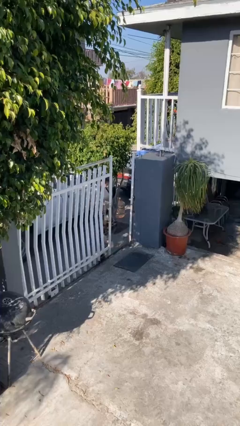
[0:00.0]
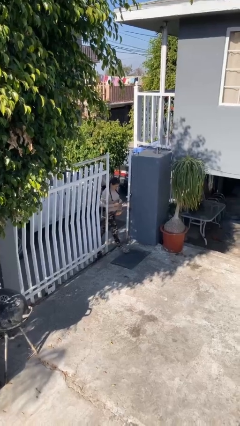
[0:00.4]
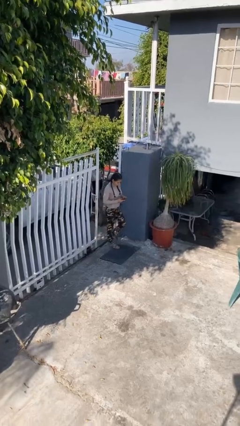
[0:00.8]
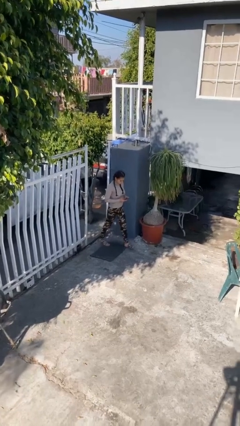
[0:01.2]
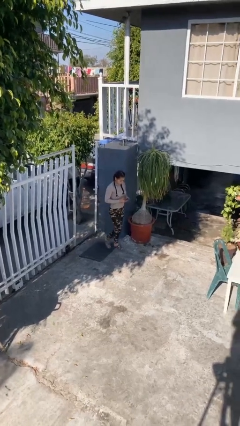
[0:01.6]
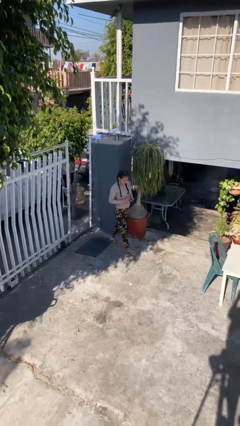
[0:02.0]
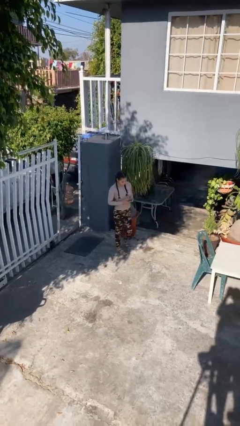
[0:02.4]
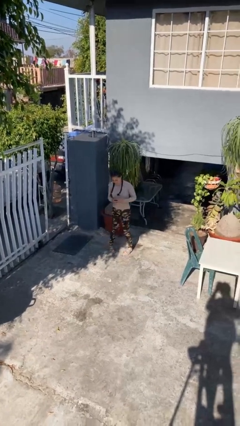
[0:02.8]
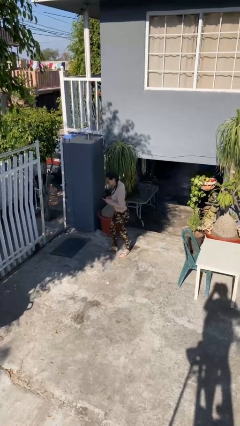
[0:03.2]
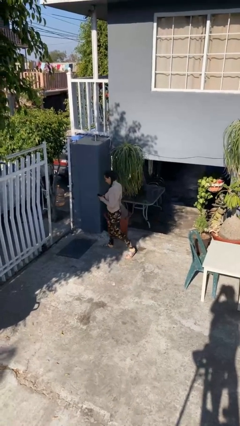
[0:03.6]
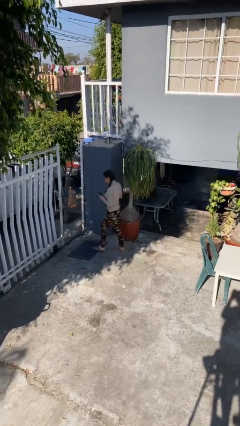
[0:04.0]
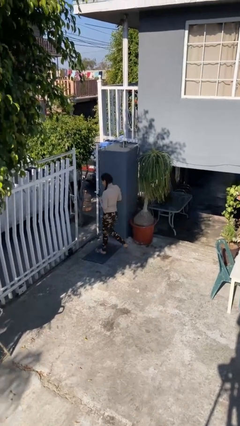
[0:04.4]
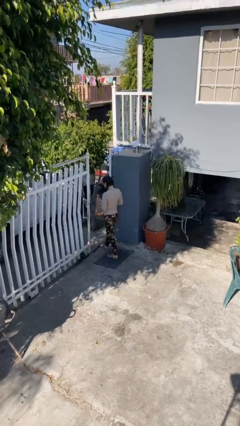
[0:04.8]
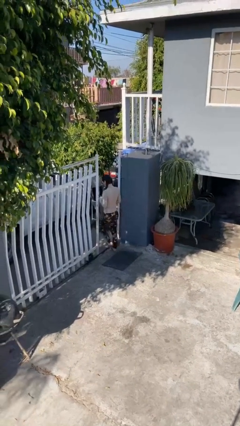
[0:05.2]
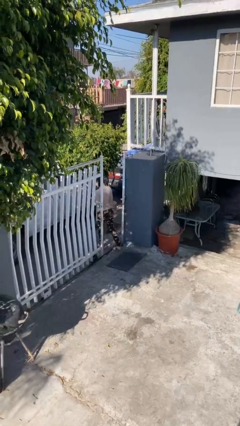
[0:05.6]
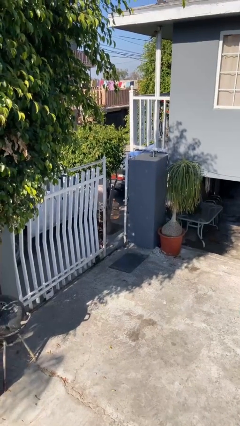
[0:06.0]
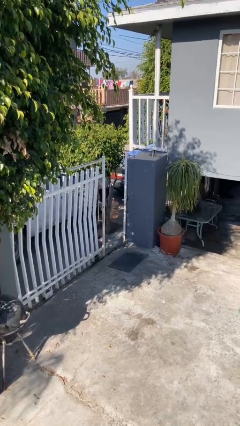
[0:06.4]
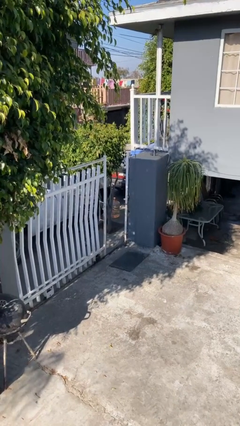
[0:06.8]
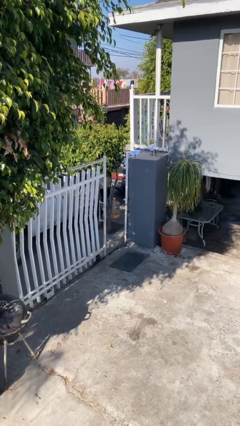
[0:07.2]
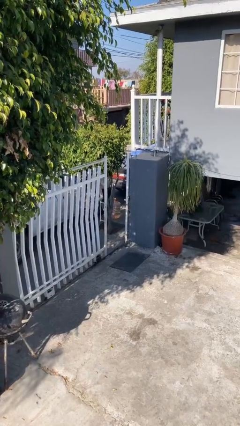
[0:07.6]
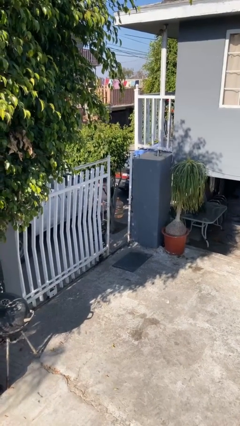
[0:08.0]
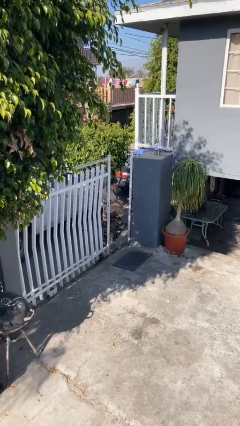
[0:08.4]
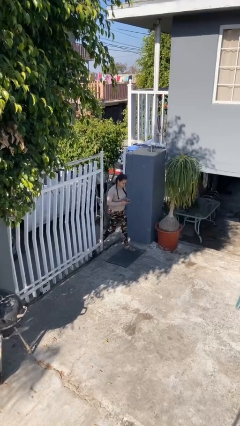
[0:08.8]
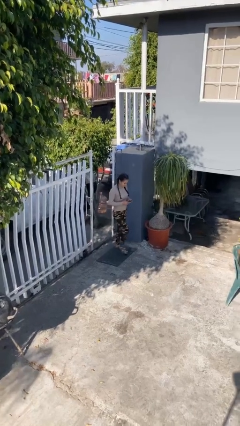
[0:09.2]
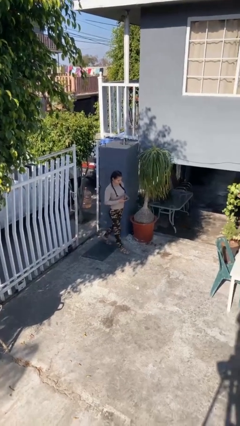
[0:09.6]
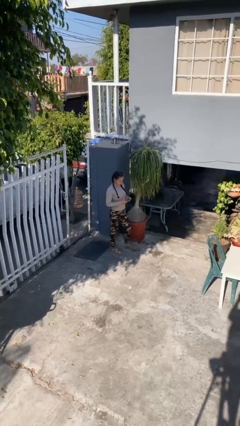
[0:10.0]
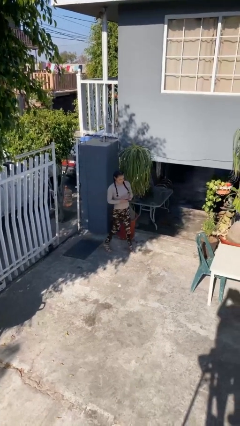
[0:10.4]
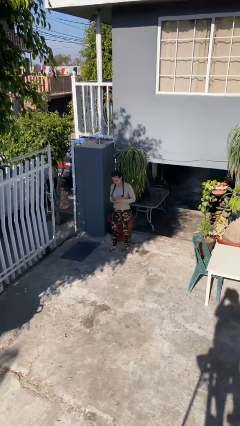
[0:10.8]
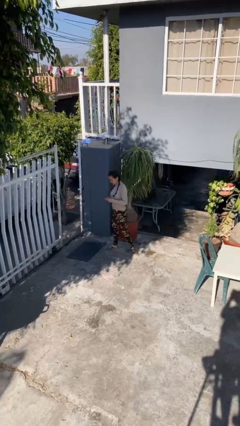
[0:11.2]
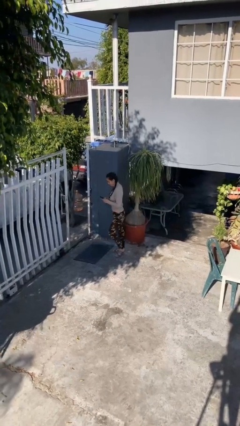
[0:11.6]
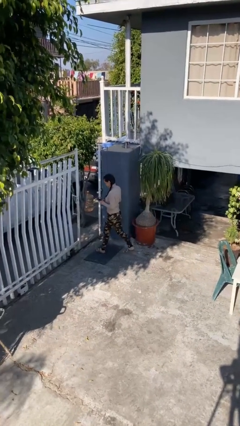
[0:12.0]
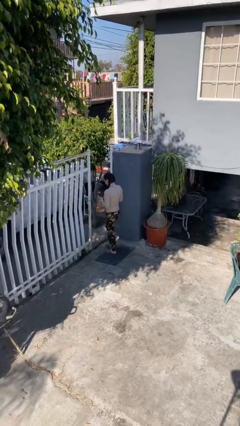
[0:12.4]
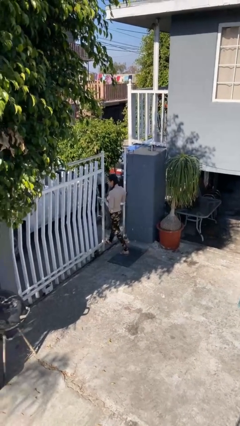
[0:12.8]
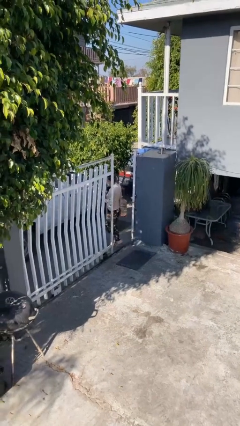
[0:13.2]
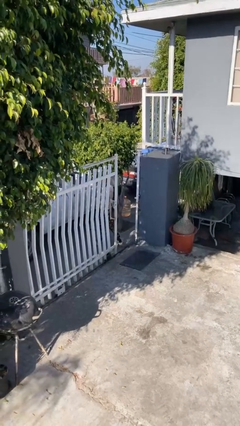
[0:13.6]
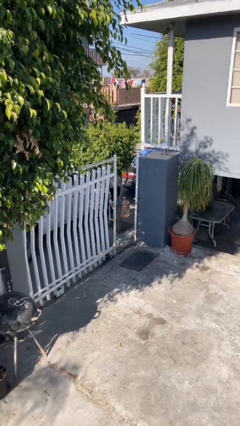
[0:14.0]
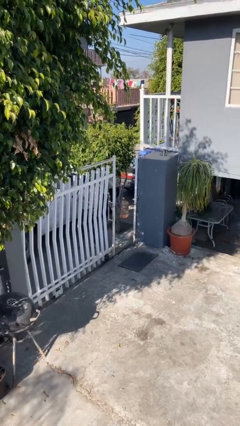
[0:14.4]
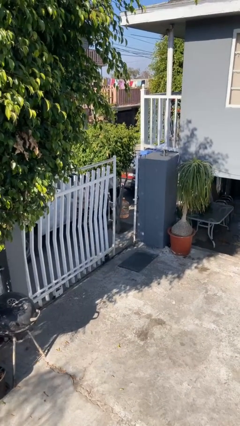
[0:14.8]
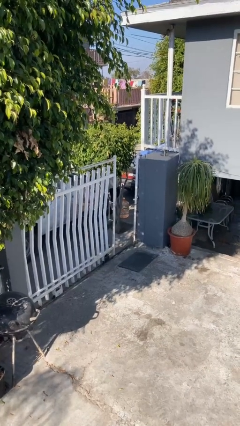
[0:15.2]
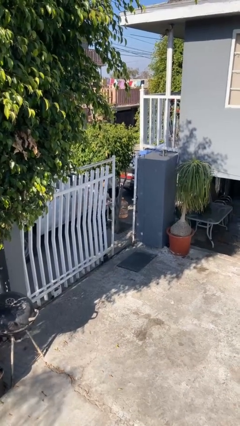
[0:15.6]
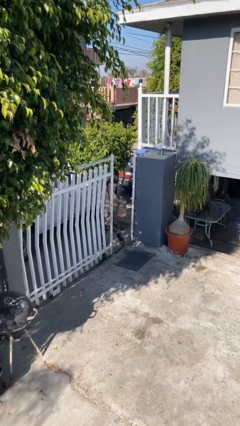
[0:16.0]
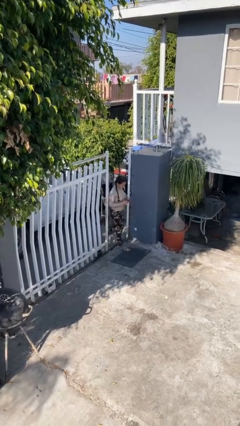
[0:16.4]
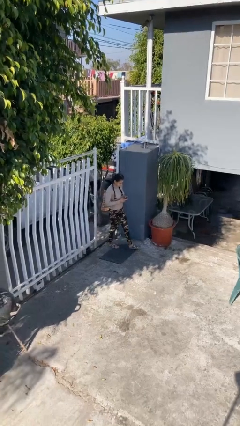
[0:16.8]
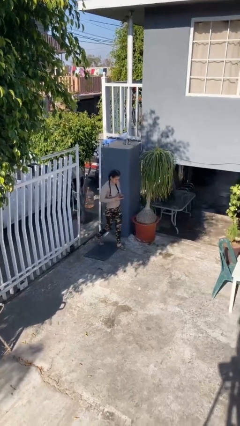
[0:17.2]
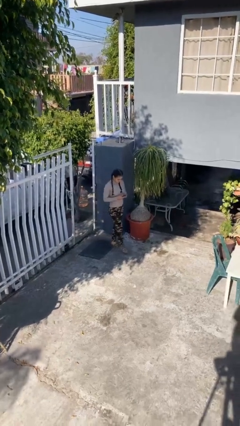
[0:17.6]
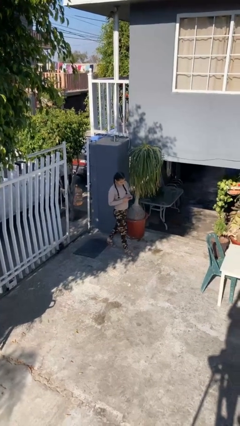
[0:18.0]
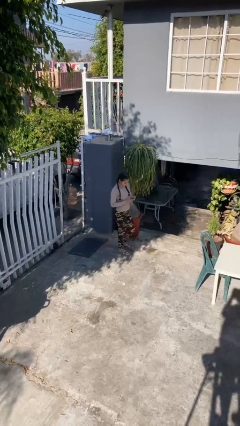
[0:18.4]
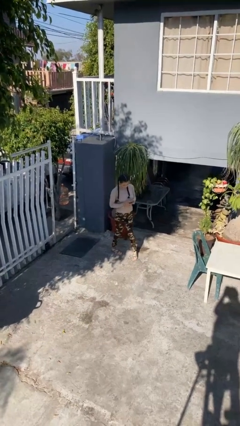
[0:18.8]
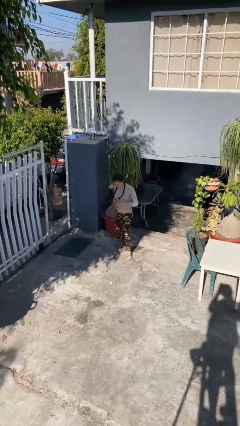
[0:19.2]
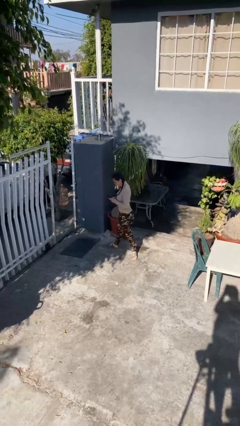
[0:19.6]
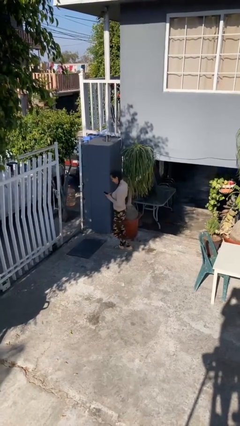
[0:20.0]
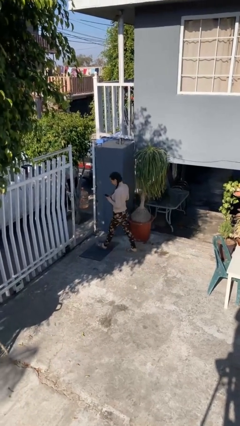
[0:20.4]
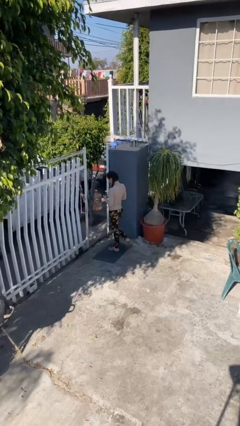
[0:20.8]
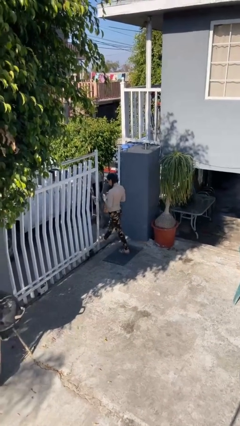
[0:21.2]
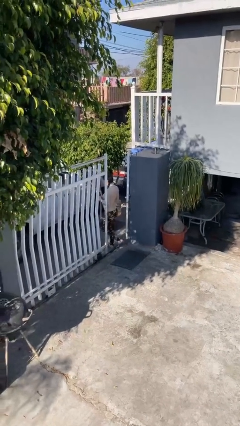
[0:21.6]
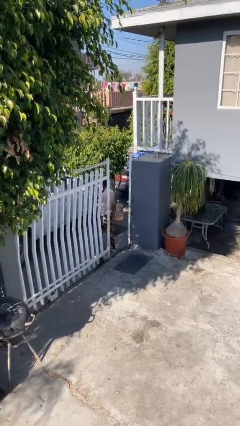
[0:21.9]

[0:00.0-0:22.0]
person texts on phone

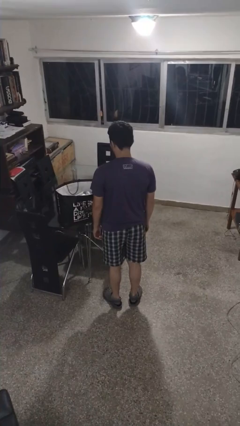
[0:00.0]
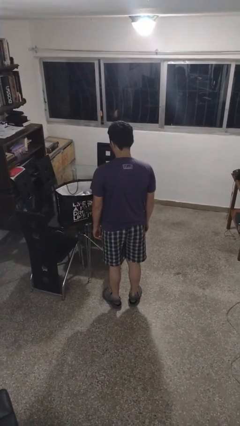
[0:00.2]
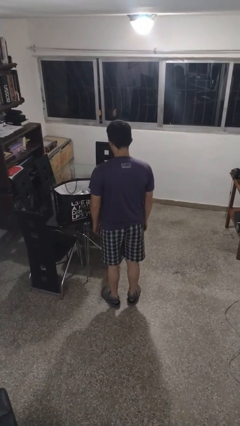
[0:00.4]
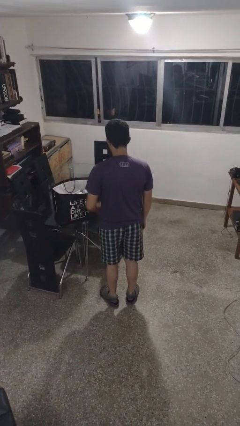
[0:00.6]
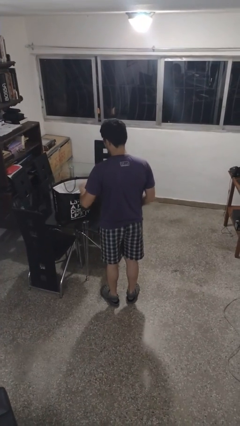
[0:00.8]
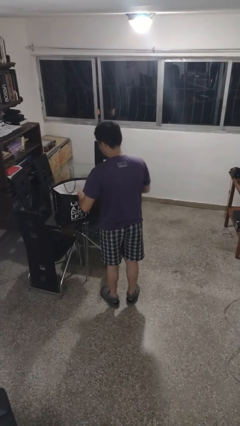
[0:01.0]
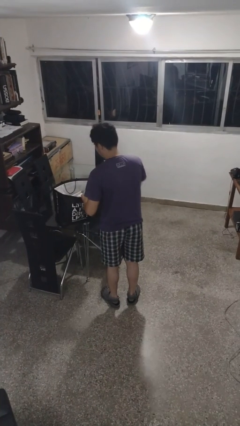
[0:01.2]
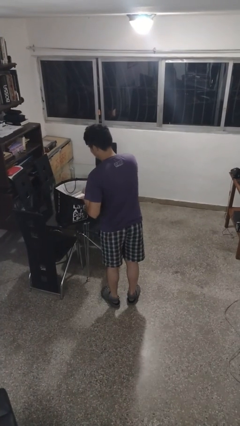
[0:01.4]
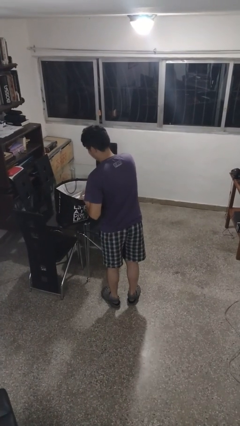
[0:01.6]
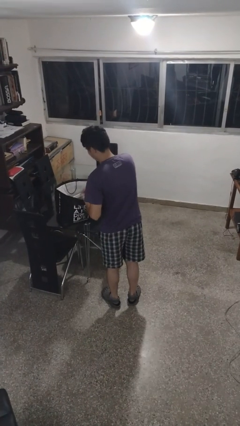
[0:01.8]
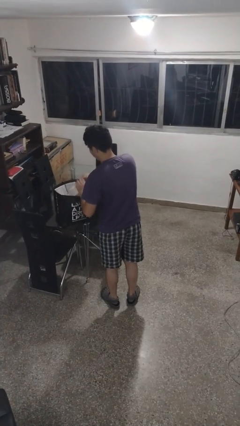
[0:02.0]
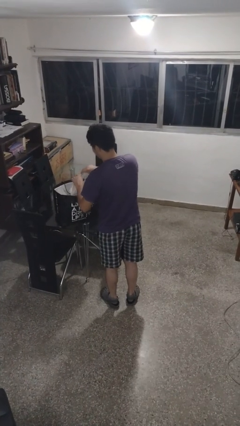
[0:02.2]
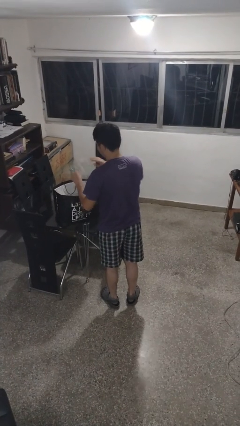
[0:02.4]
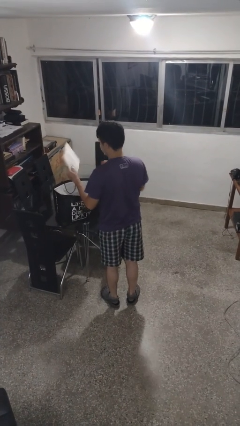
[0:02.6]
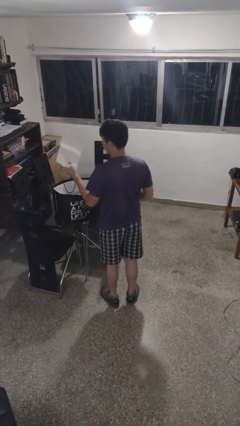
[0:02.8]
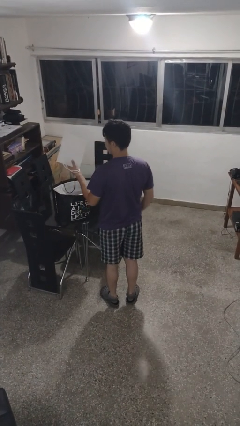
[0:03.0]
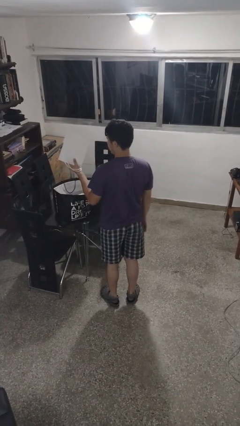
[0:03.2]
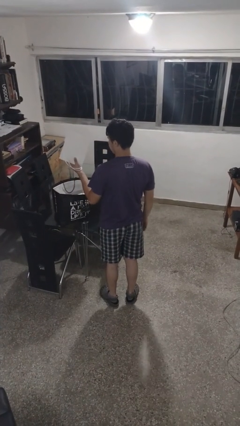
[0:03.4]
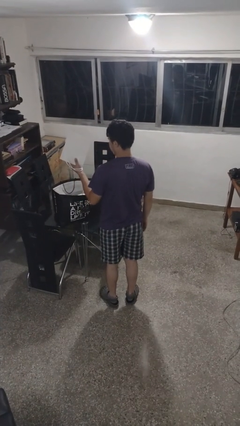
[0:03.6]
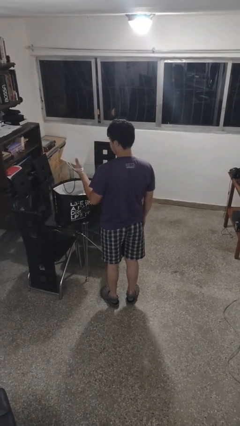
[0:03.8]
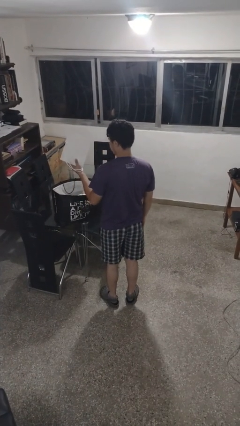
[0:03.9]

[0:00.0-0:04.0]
person takes object from bag

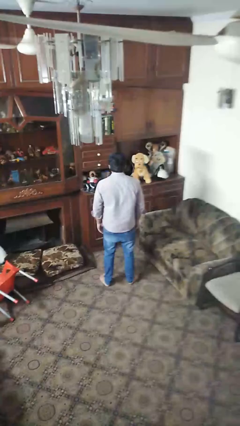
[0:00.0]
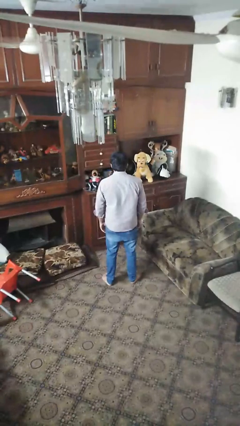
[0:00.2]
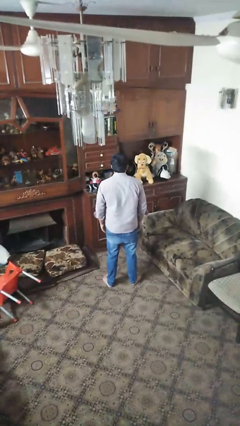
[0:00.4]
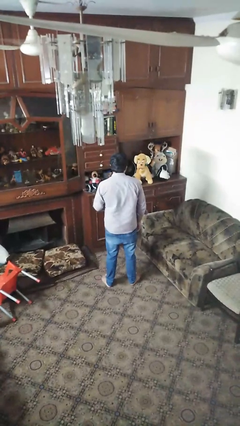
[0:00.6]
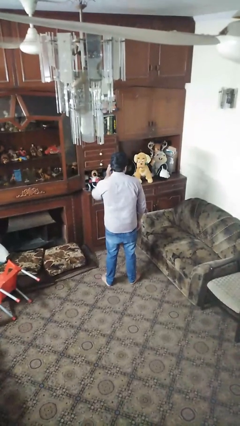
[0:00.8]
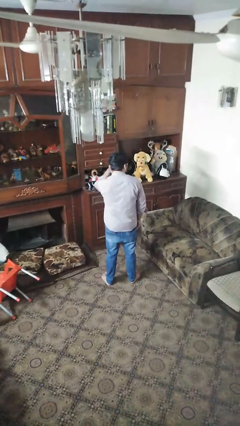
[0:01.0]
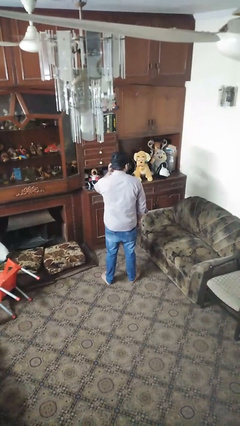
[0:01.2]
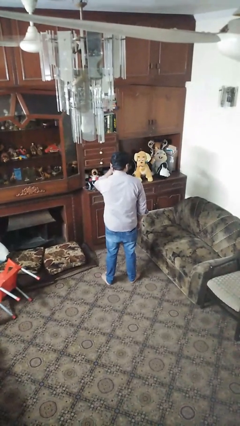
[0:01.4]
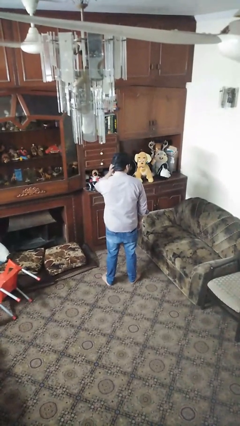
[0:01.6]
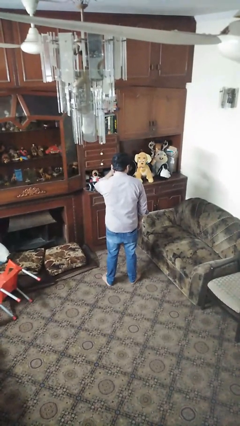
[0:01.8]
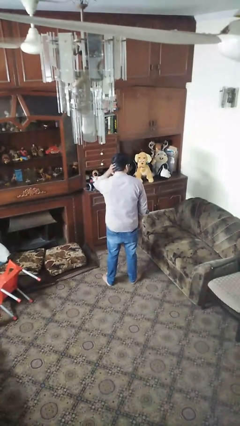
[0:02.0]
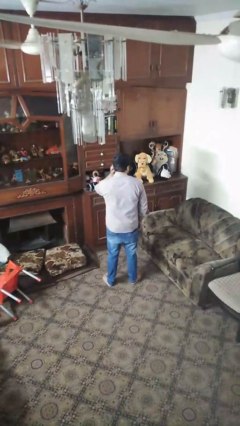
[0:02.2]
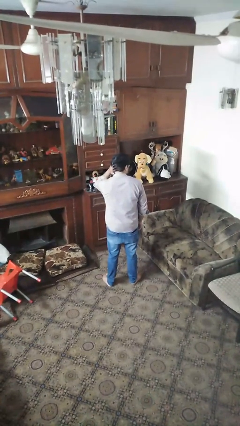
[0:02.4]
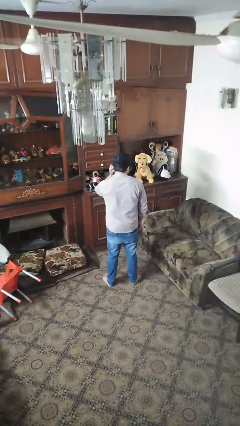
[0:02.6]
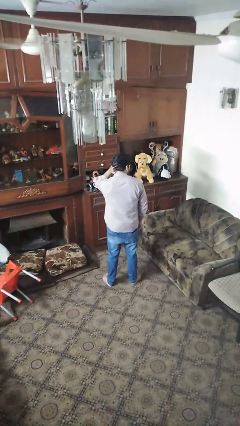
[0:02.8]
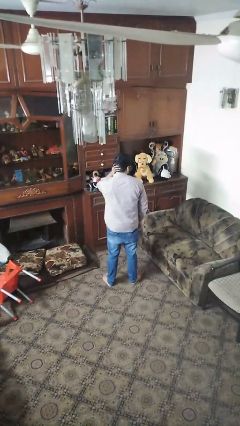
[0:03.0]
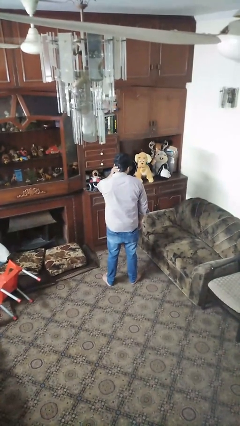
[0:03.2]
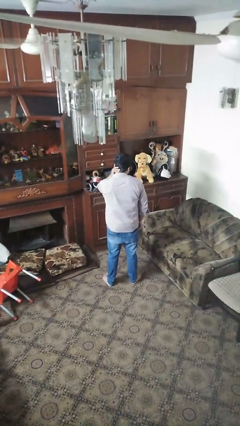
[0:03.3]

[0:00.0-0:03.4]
person strokes hair
